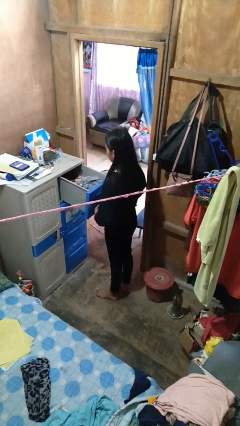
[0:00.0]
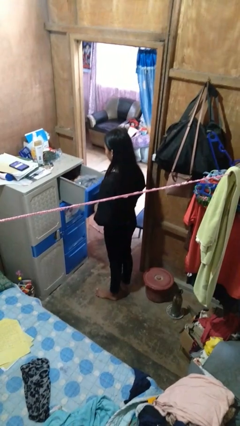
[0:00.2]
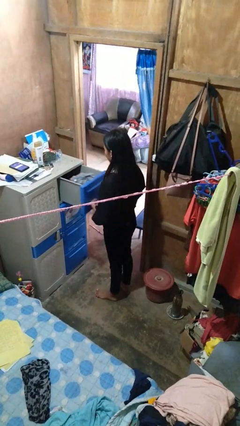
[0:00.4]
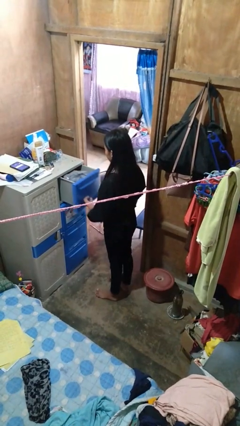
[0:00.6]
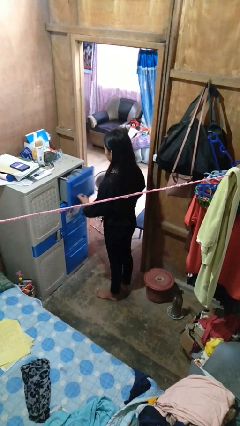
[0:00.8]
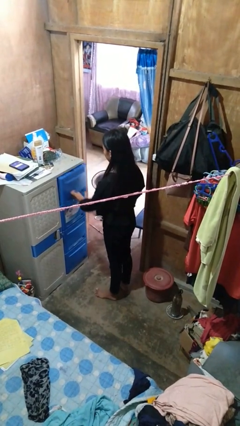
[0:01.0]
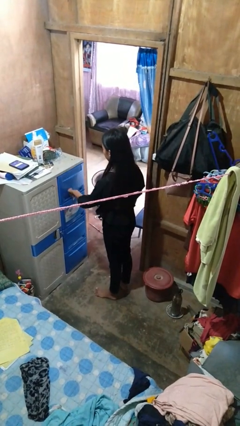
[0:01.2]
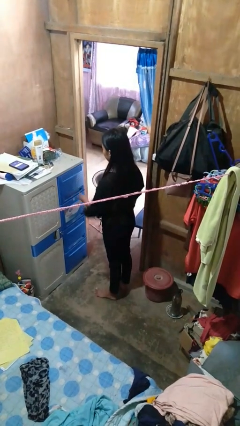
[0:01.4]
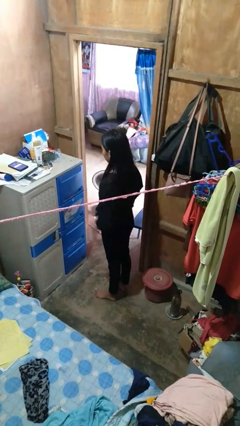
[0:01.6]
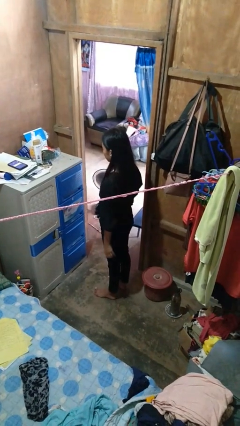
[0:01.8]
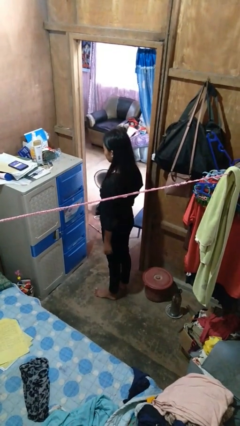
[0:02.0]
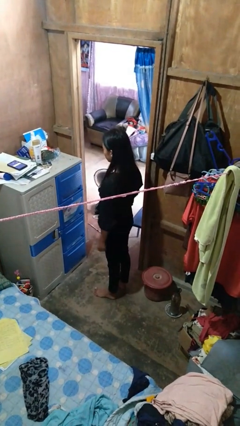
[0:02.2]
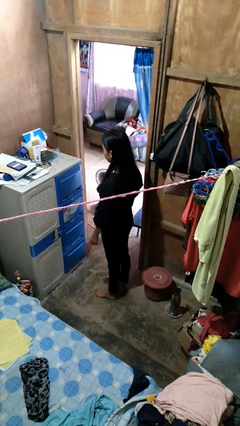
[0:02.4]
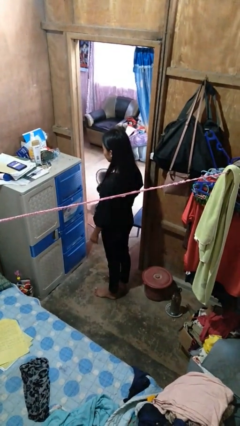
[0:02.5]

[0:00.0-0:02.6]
person closes dresser drawer

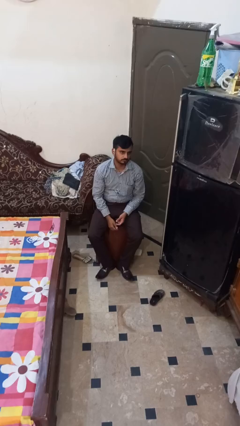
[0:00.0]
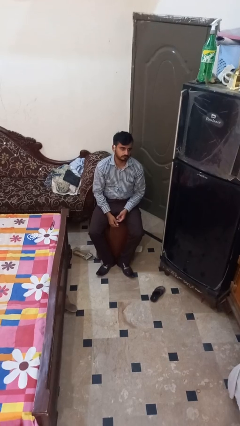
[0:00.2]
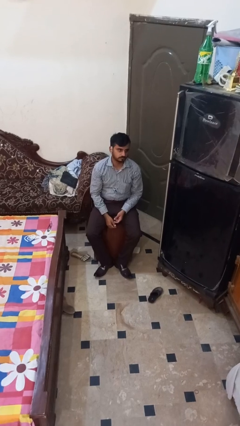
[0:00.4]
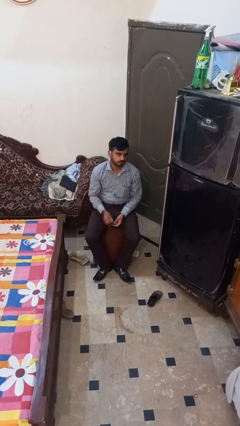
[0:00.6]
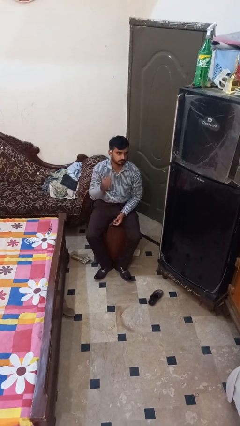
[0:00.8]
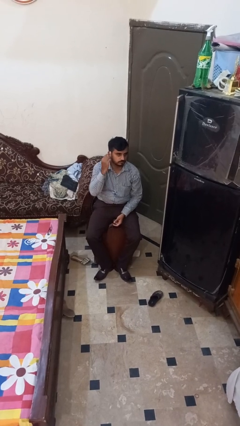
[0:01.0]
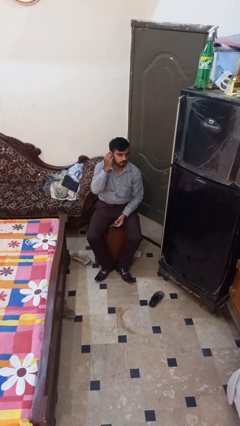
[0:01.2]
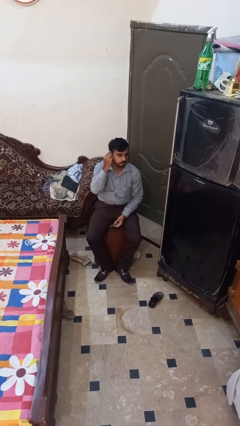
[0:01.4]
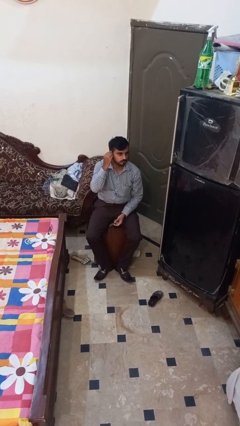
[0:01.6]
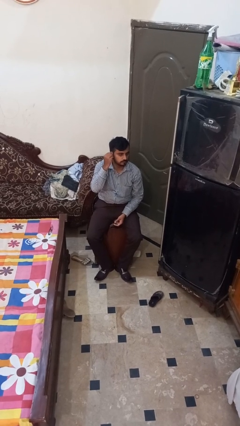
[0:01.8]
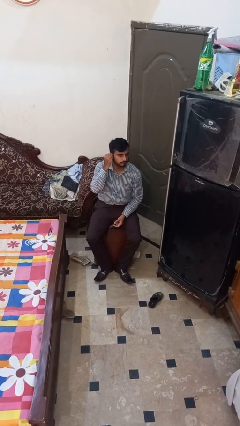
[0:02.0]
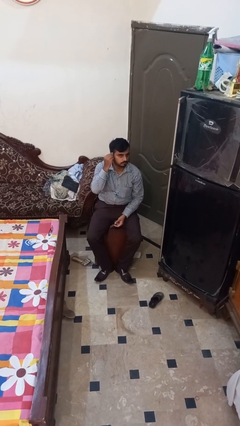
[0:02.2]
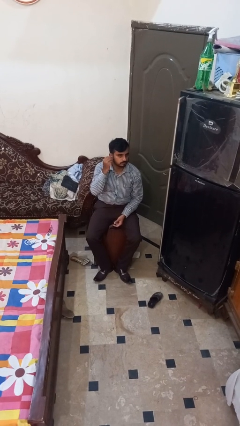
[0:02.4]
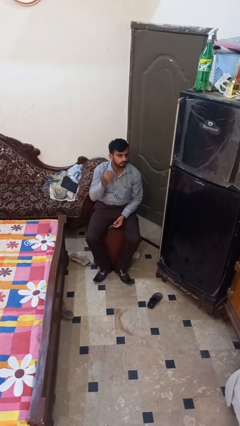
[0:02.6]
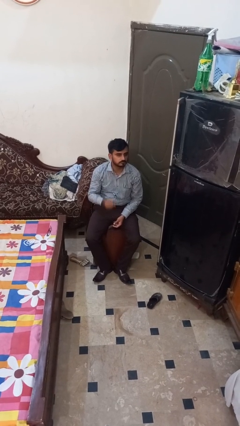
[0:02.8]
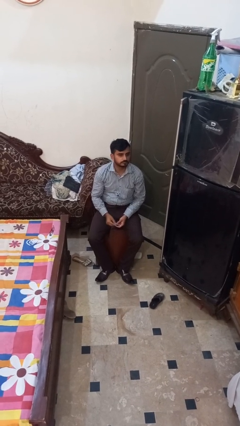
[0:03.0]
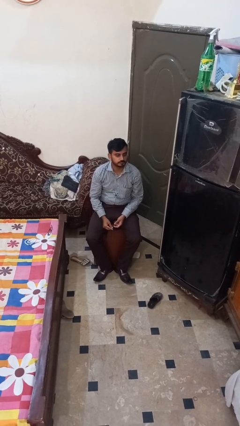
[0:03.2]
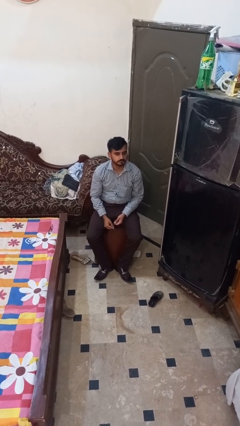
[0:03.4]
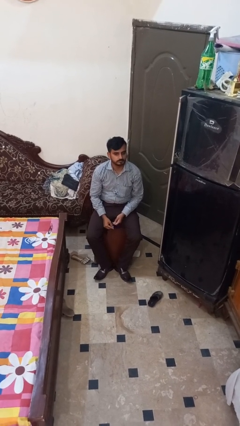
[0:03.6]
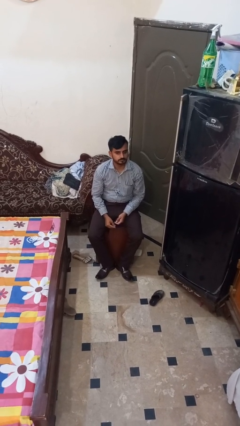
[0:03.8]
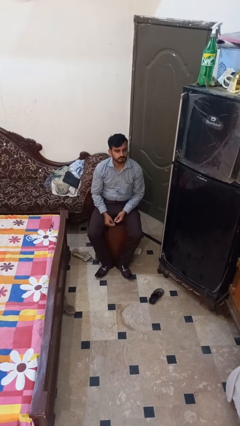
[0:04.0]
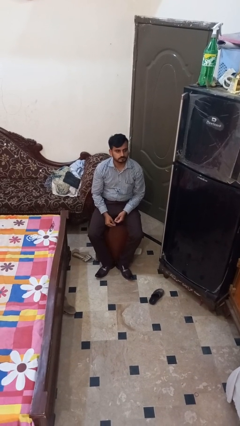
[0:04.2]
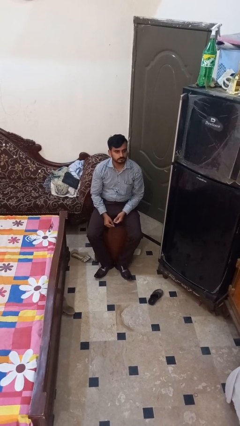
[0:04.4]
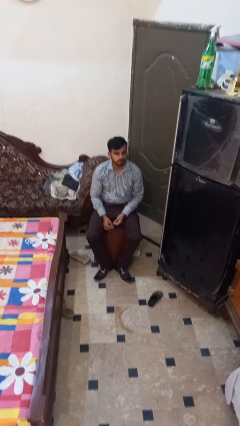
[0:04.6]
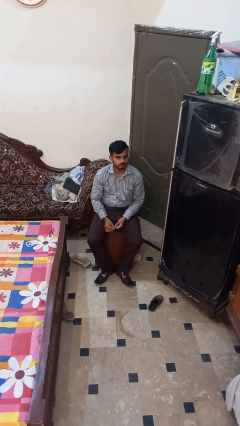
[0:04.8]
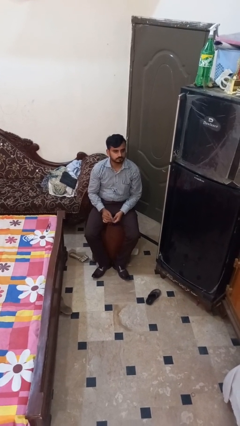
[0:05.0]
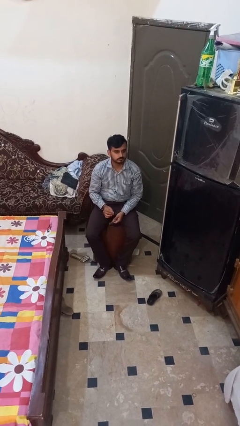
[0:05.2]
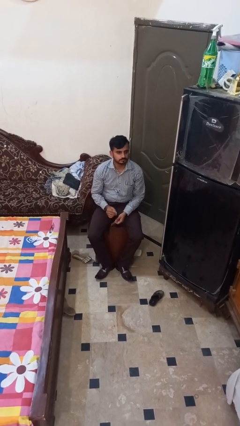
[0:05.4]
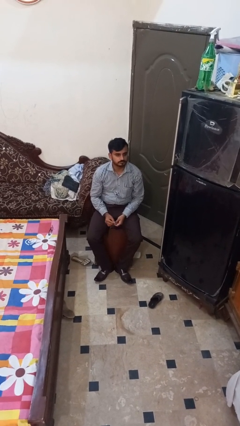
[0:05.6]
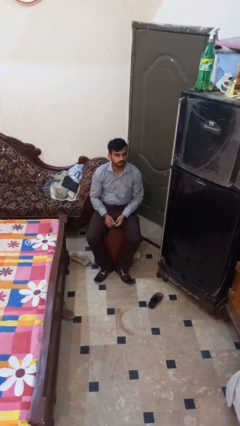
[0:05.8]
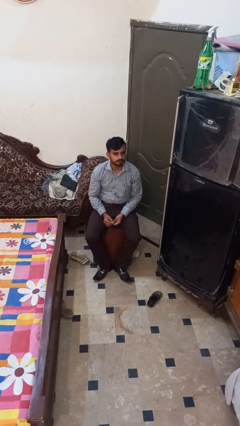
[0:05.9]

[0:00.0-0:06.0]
person takes off earrings

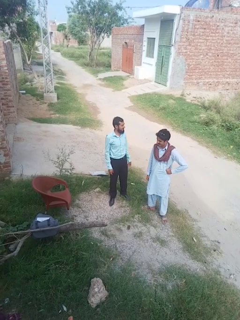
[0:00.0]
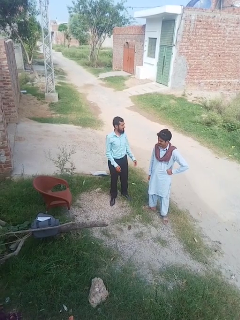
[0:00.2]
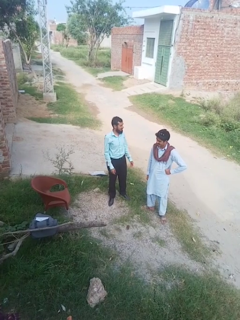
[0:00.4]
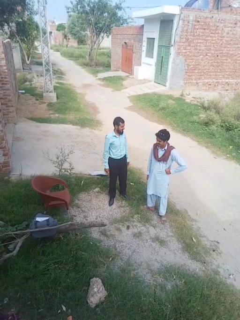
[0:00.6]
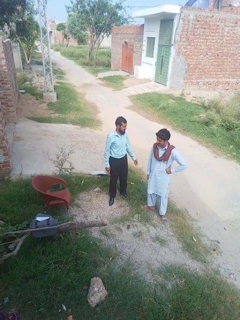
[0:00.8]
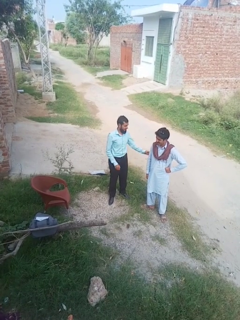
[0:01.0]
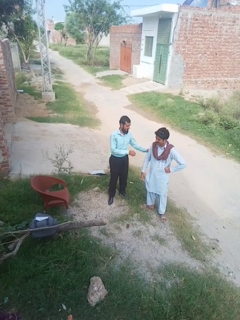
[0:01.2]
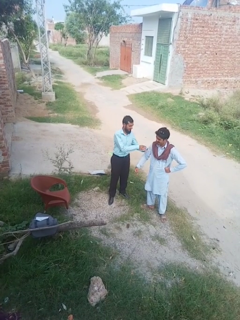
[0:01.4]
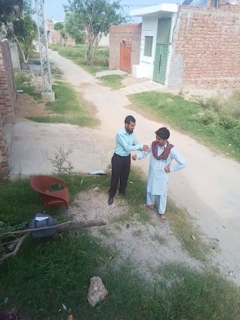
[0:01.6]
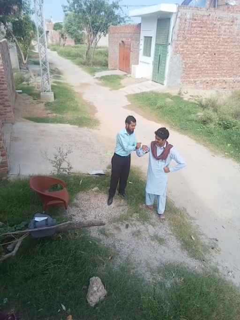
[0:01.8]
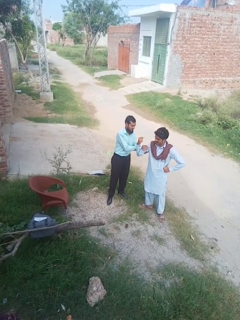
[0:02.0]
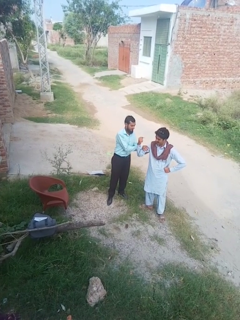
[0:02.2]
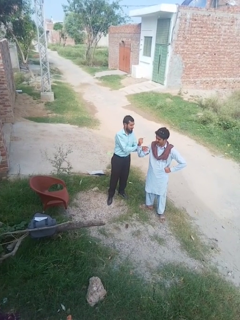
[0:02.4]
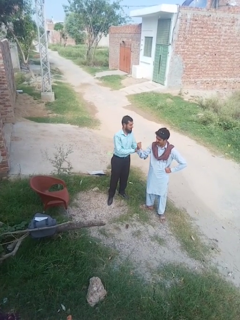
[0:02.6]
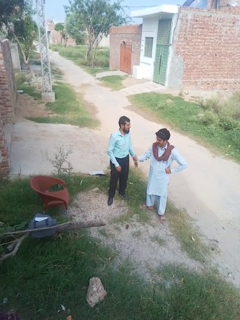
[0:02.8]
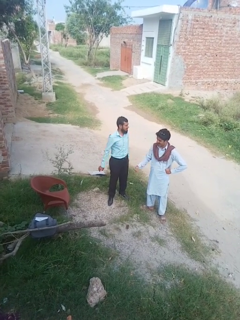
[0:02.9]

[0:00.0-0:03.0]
person grabs person by bicep

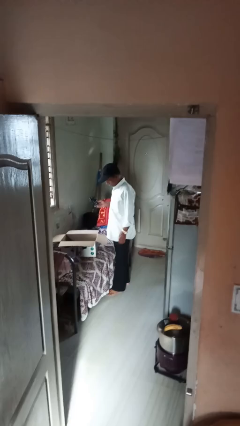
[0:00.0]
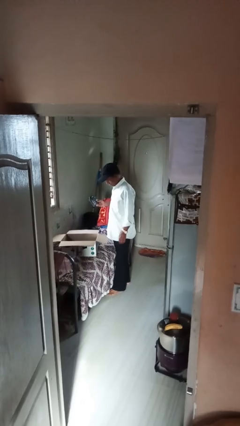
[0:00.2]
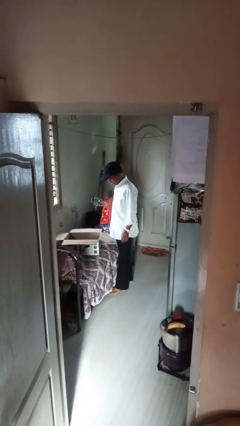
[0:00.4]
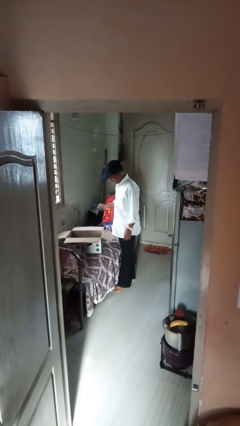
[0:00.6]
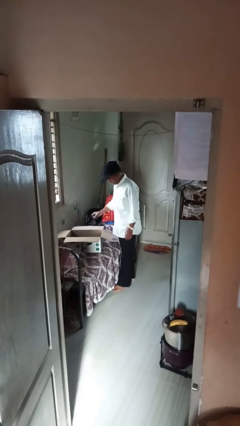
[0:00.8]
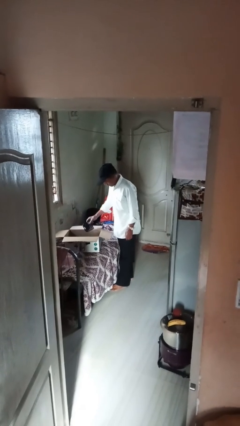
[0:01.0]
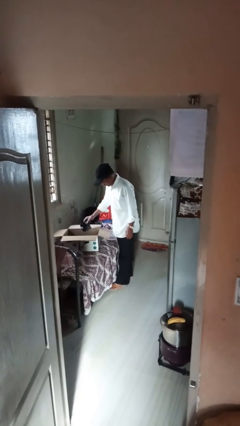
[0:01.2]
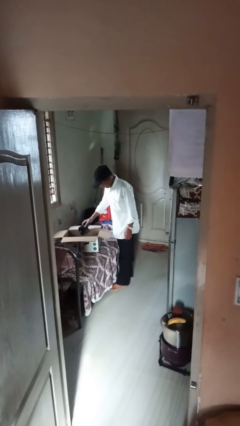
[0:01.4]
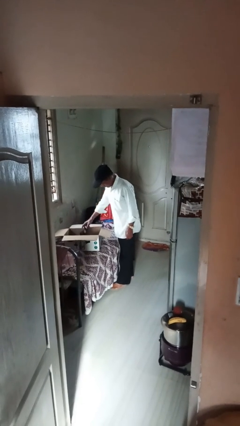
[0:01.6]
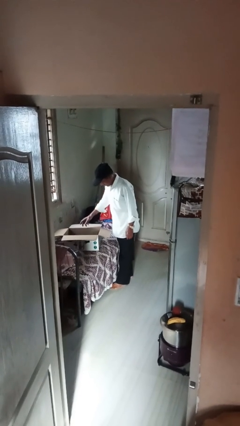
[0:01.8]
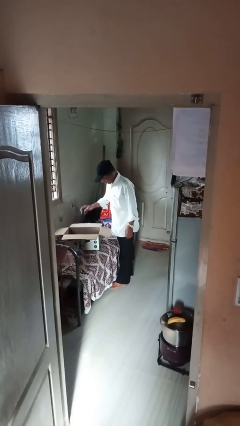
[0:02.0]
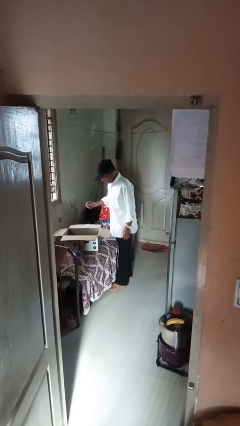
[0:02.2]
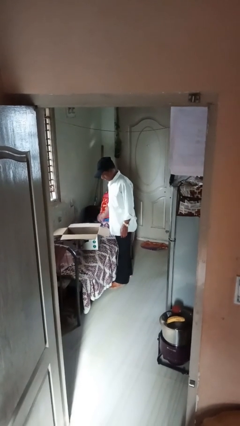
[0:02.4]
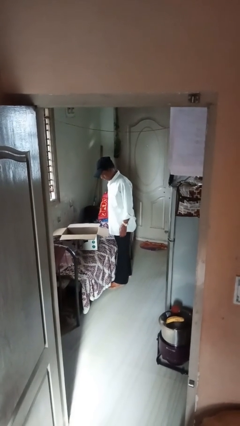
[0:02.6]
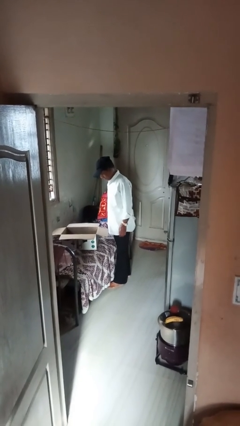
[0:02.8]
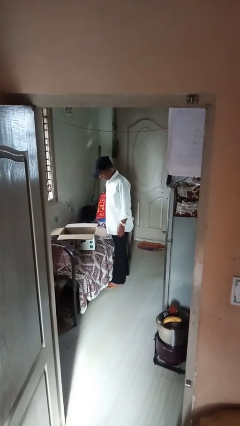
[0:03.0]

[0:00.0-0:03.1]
person puts object into box

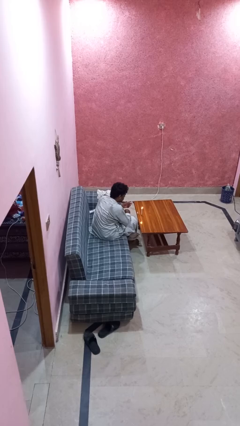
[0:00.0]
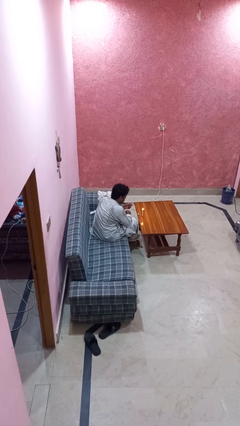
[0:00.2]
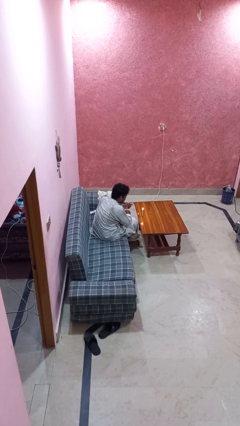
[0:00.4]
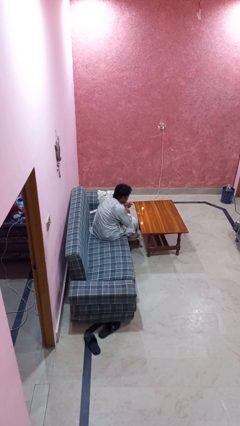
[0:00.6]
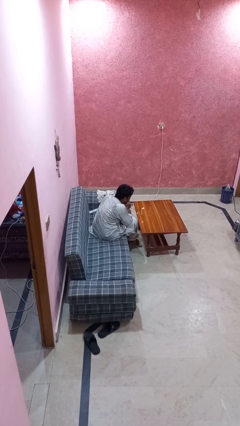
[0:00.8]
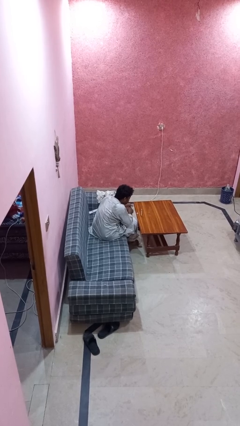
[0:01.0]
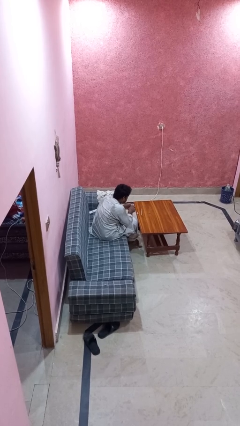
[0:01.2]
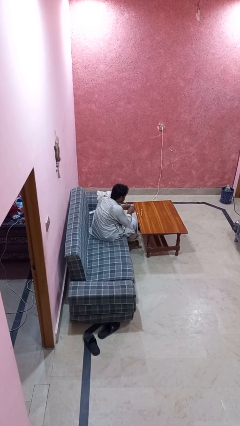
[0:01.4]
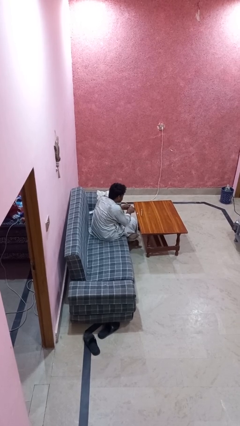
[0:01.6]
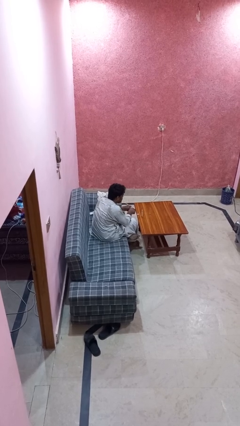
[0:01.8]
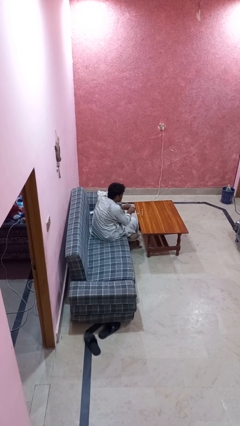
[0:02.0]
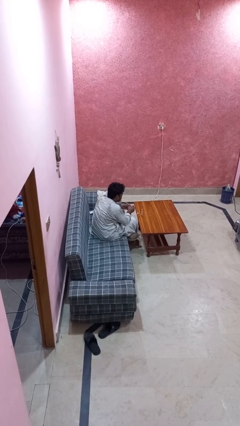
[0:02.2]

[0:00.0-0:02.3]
person extinguishes candle

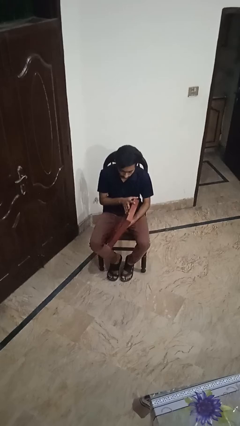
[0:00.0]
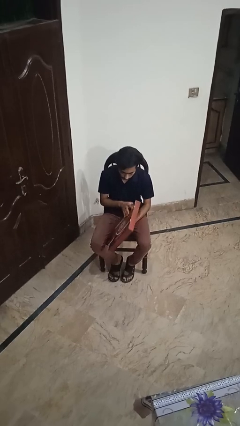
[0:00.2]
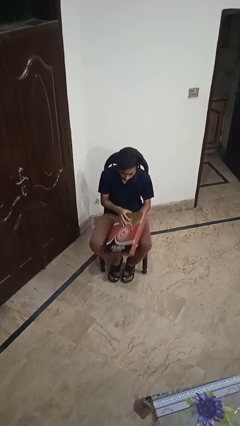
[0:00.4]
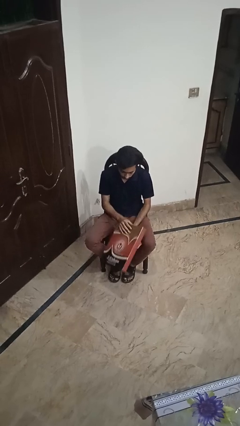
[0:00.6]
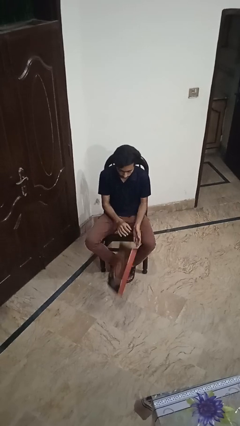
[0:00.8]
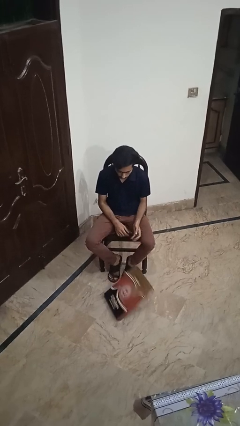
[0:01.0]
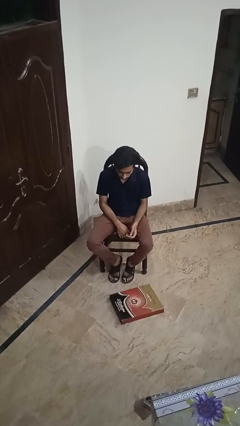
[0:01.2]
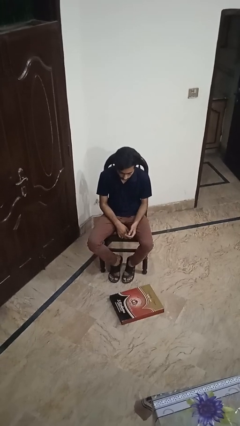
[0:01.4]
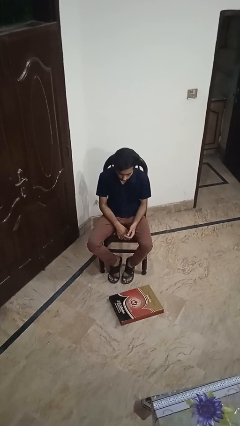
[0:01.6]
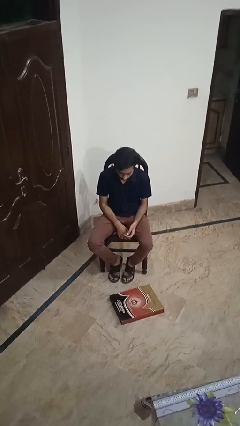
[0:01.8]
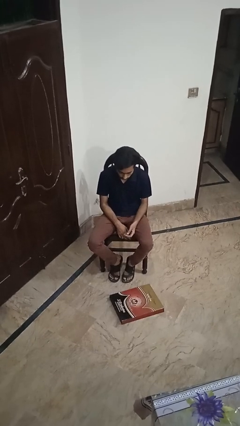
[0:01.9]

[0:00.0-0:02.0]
person drops object
